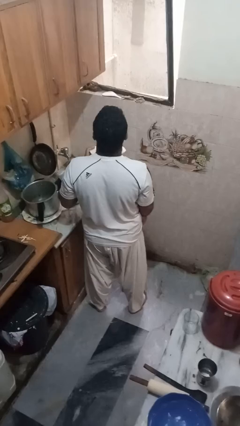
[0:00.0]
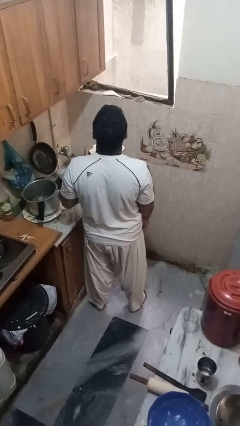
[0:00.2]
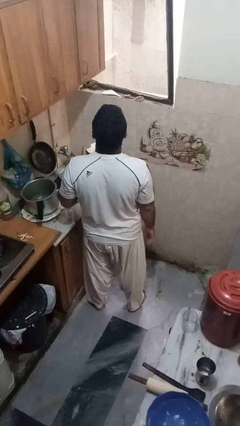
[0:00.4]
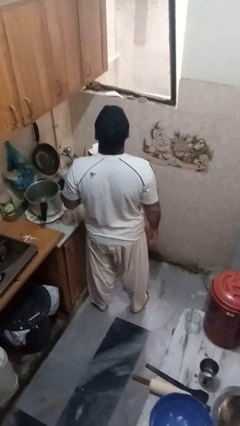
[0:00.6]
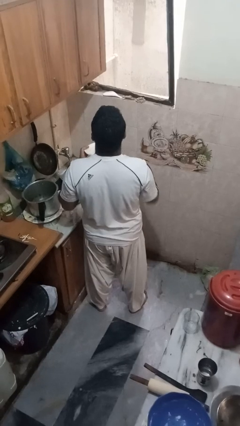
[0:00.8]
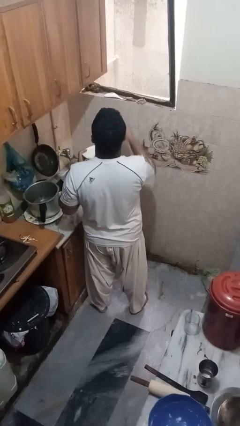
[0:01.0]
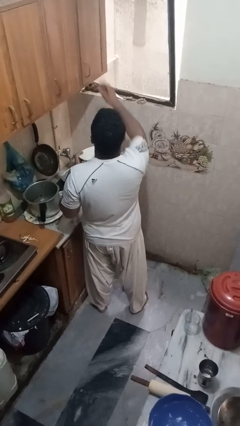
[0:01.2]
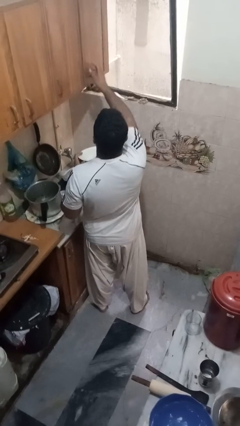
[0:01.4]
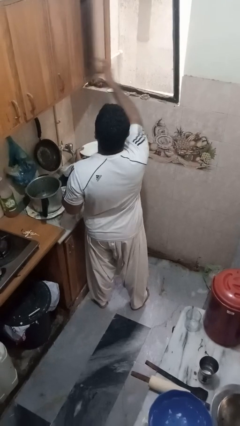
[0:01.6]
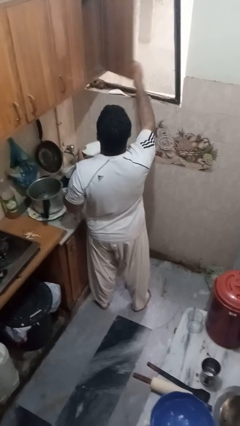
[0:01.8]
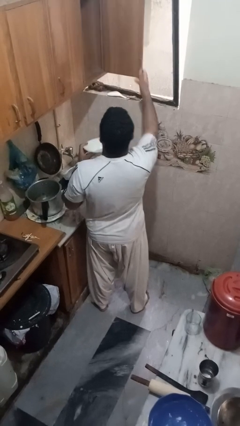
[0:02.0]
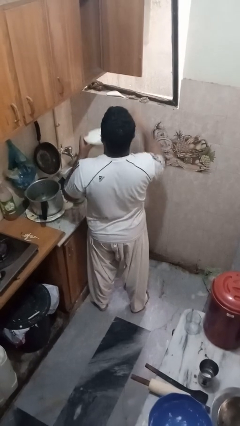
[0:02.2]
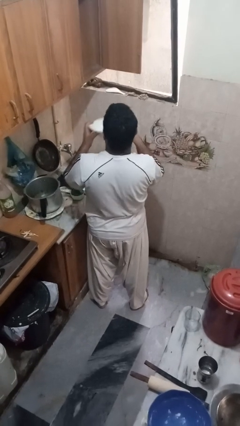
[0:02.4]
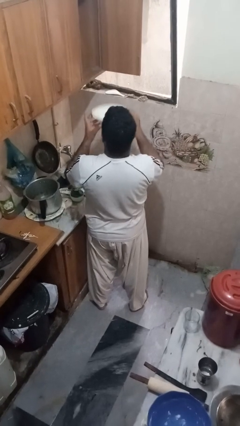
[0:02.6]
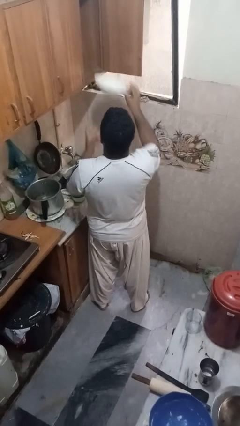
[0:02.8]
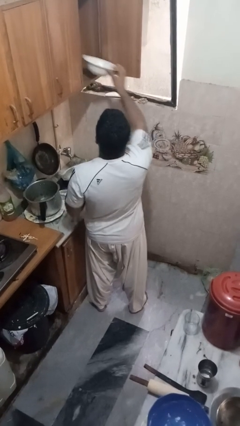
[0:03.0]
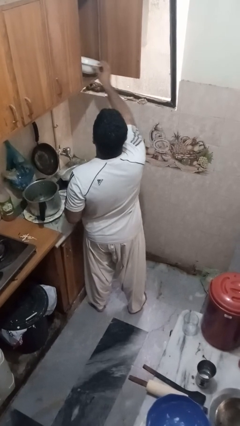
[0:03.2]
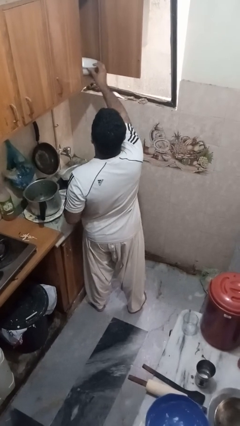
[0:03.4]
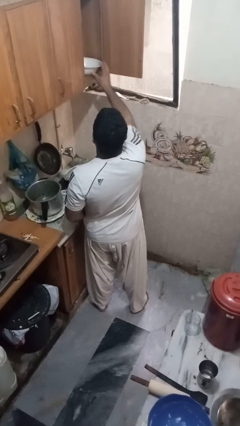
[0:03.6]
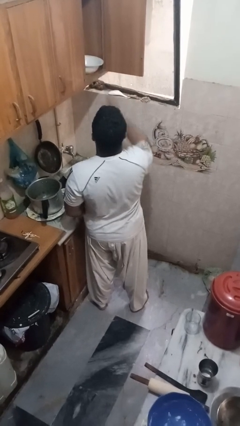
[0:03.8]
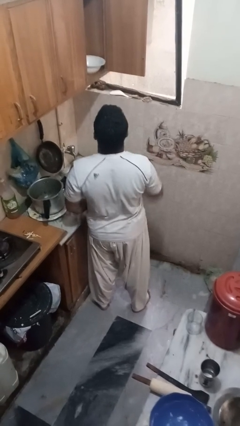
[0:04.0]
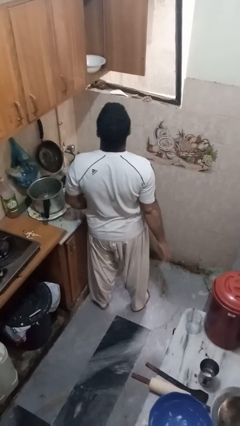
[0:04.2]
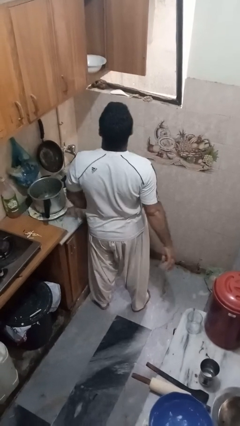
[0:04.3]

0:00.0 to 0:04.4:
person puts object in cabinet

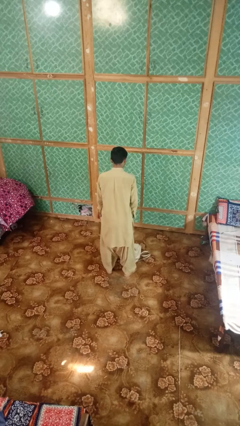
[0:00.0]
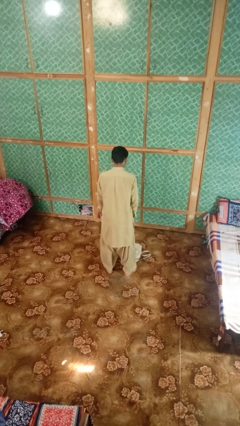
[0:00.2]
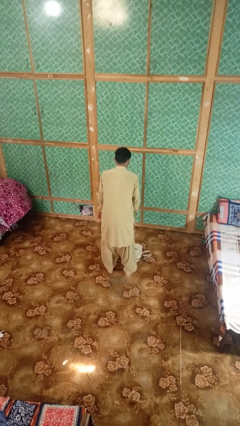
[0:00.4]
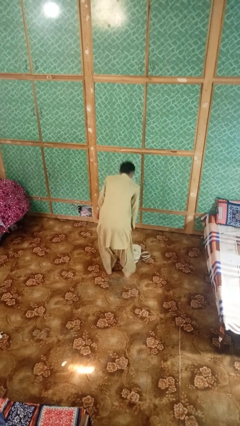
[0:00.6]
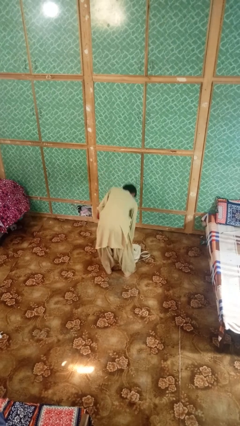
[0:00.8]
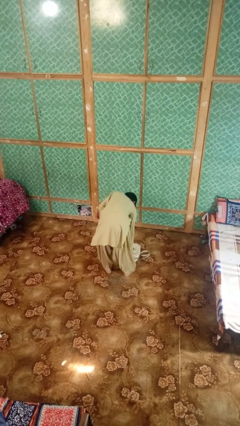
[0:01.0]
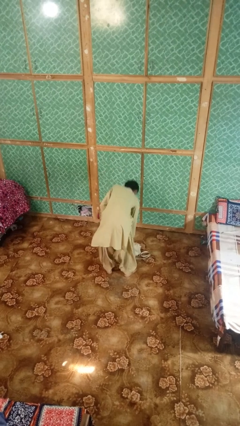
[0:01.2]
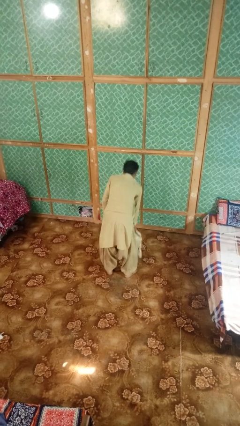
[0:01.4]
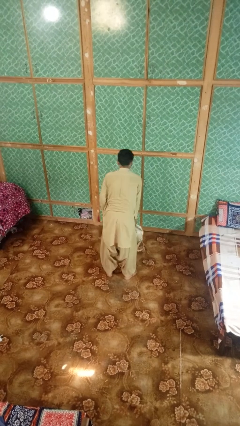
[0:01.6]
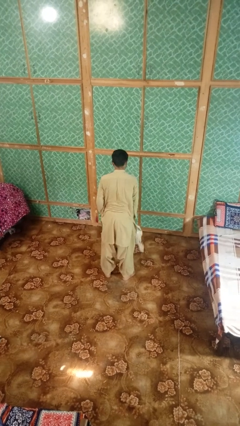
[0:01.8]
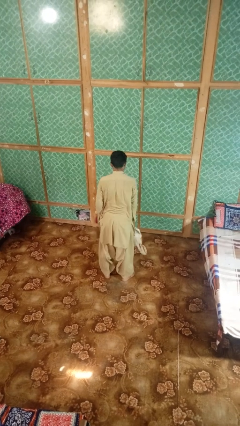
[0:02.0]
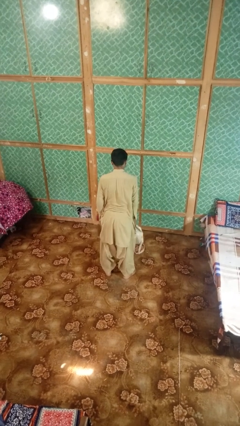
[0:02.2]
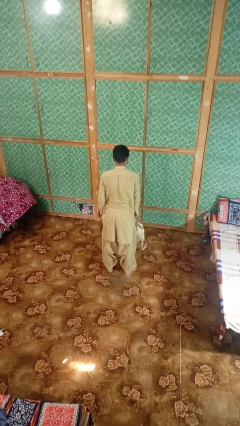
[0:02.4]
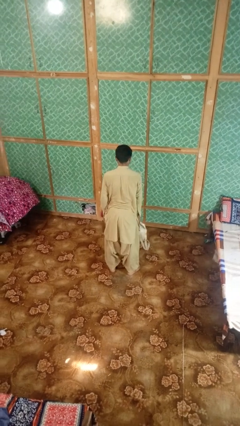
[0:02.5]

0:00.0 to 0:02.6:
person picks up object from floor

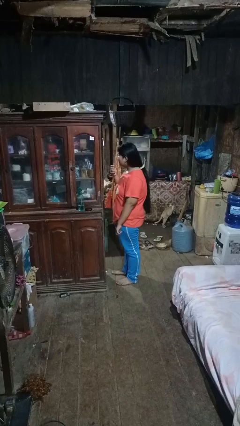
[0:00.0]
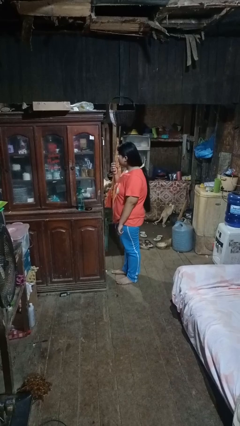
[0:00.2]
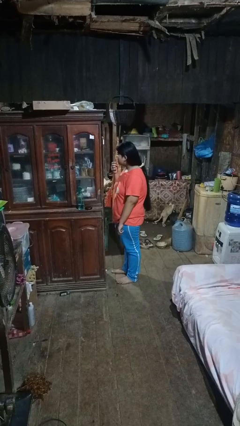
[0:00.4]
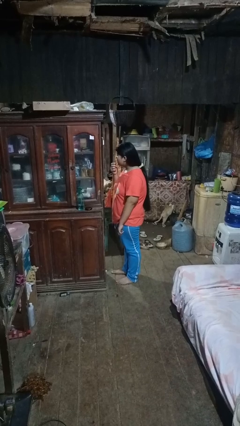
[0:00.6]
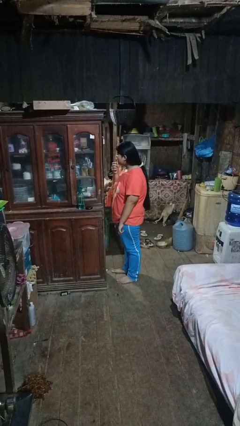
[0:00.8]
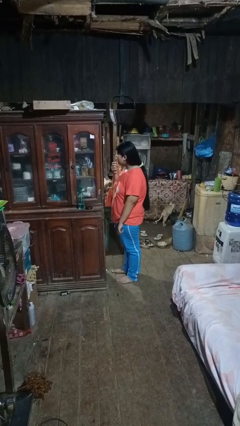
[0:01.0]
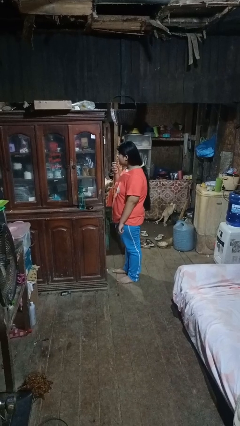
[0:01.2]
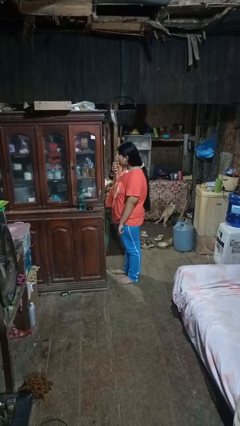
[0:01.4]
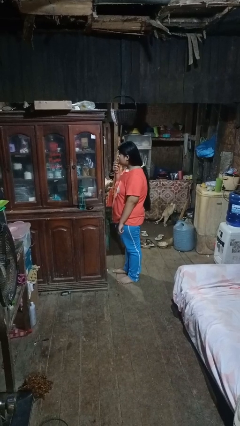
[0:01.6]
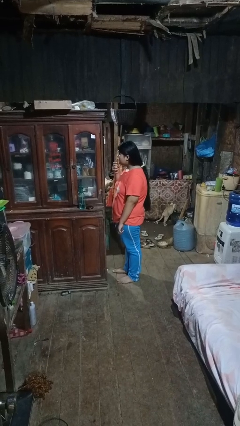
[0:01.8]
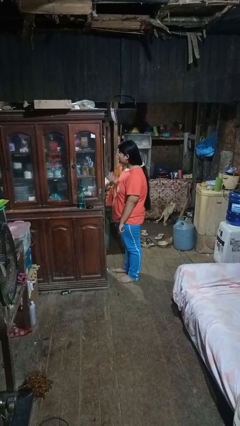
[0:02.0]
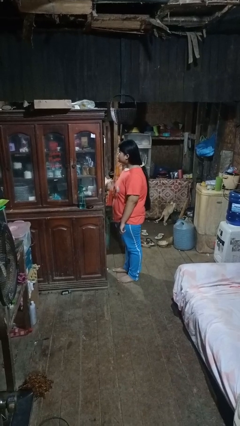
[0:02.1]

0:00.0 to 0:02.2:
person applies lip makeup

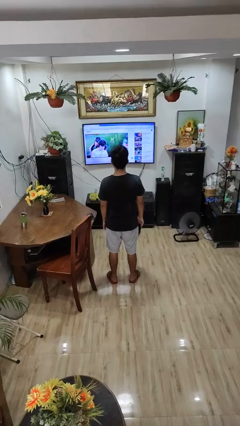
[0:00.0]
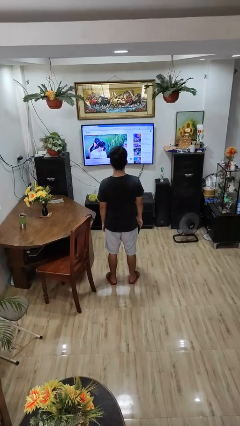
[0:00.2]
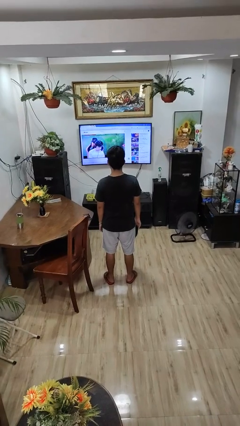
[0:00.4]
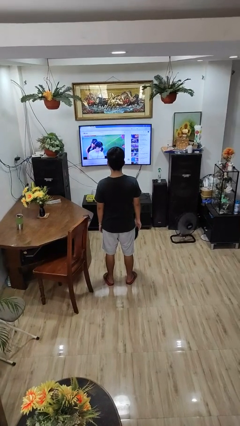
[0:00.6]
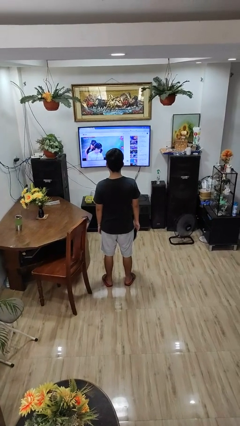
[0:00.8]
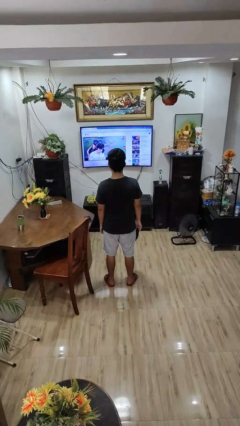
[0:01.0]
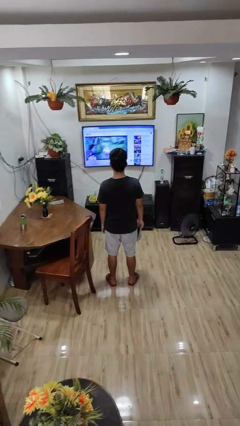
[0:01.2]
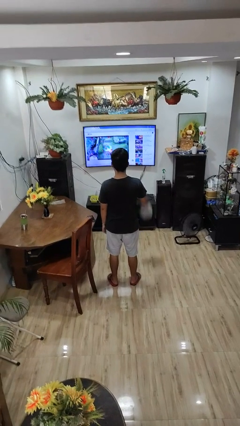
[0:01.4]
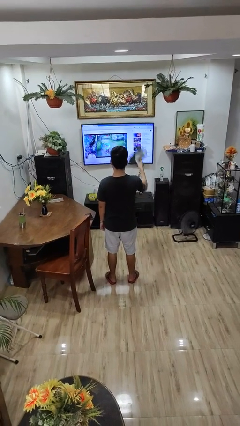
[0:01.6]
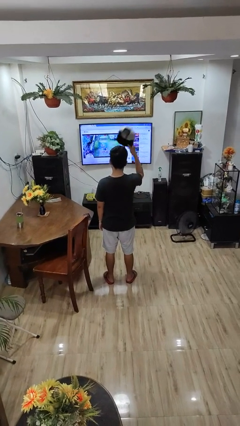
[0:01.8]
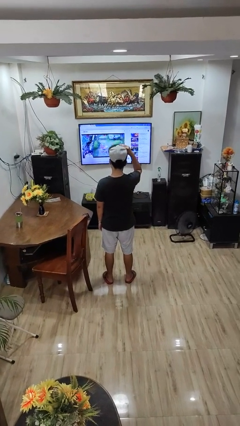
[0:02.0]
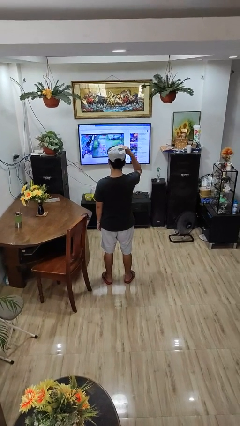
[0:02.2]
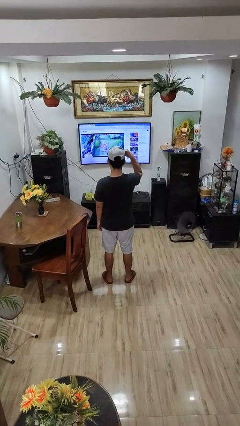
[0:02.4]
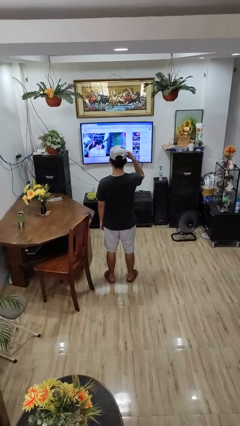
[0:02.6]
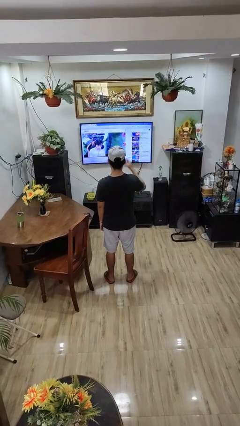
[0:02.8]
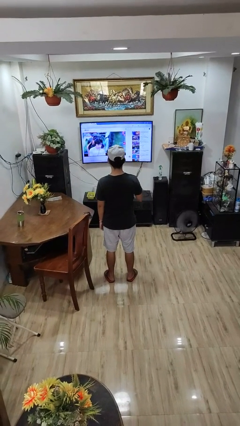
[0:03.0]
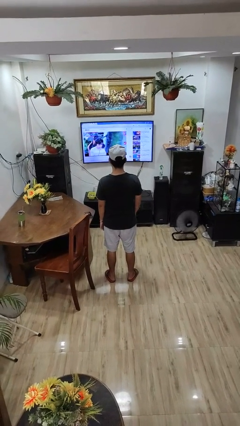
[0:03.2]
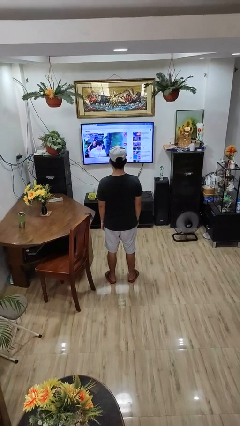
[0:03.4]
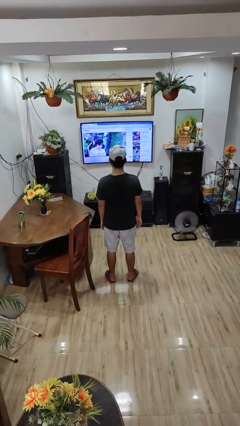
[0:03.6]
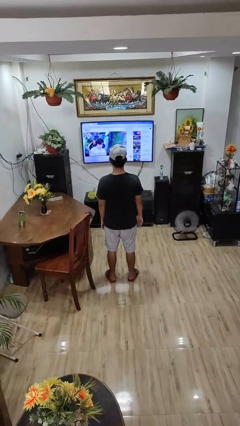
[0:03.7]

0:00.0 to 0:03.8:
person sweeps floor

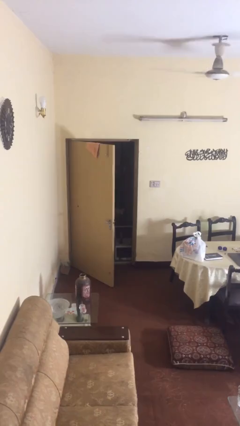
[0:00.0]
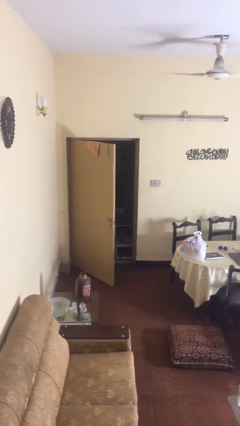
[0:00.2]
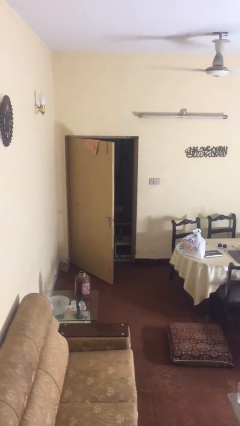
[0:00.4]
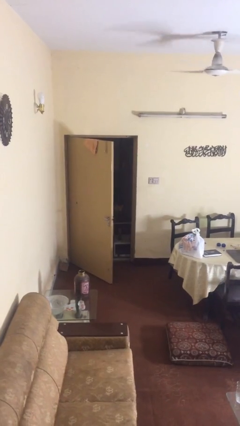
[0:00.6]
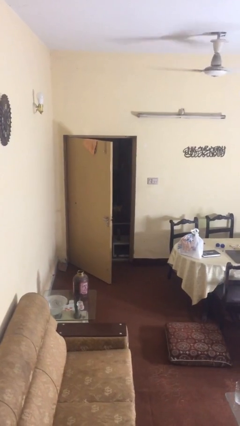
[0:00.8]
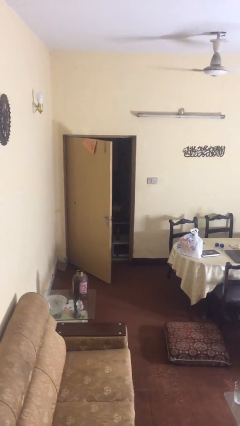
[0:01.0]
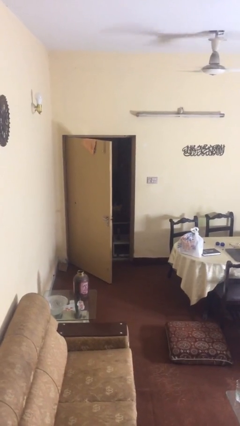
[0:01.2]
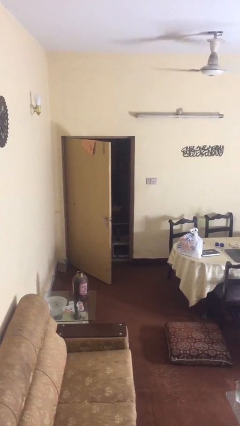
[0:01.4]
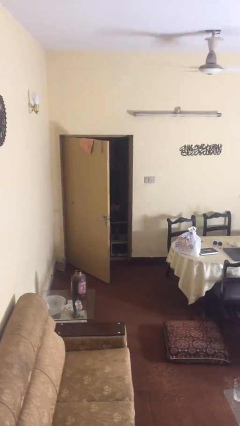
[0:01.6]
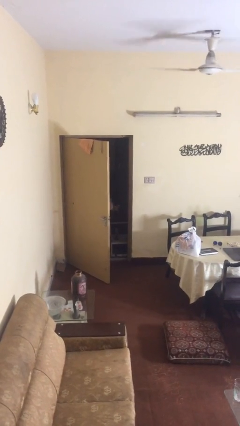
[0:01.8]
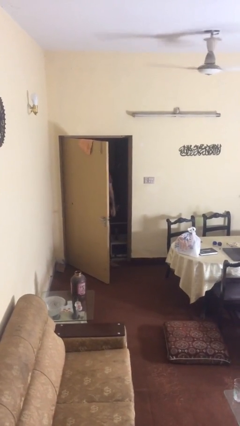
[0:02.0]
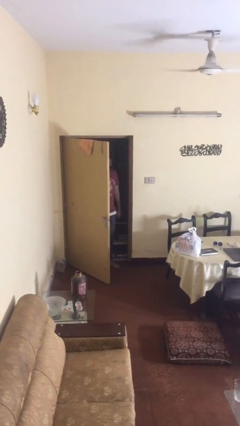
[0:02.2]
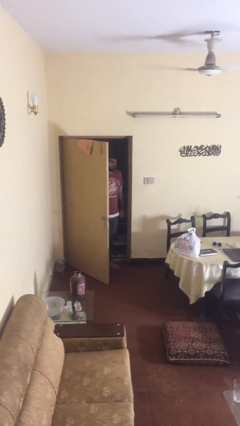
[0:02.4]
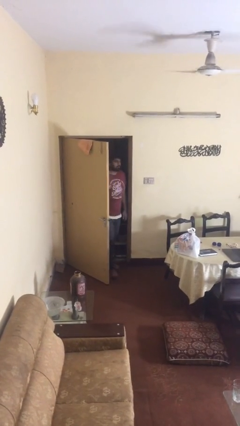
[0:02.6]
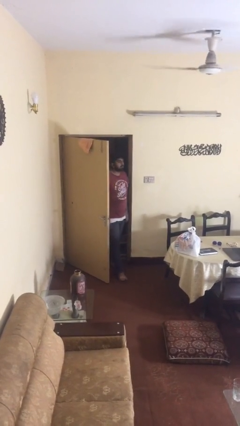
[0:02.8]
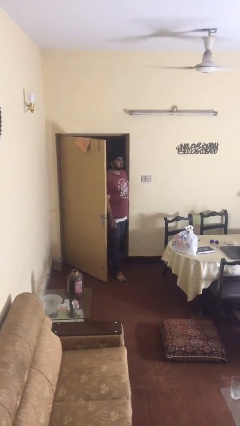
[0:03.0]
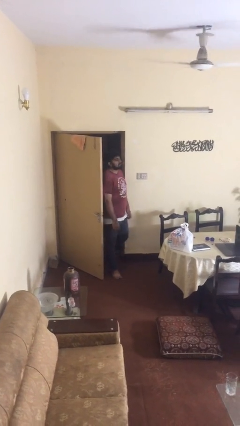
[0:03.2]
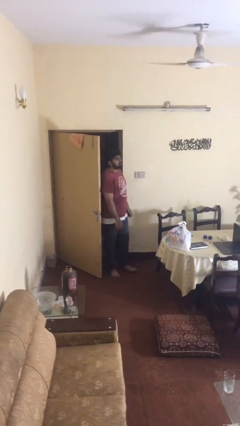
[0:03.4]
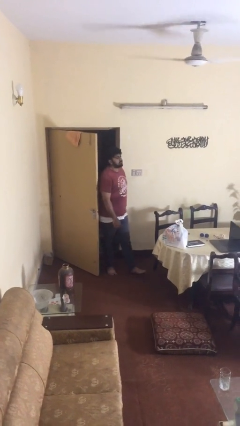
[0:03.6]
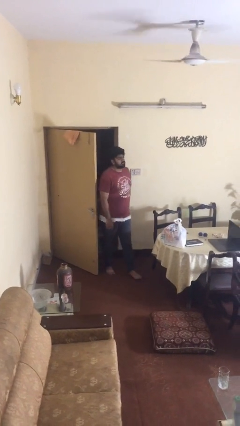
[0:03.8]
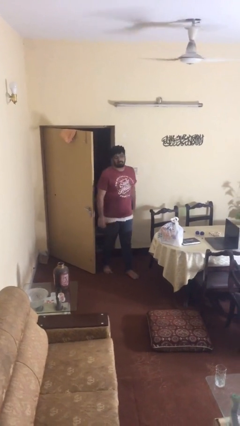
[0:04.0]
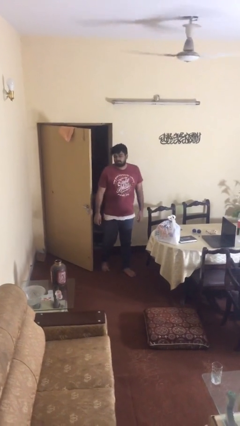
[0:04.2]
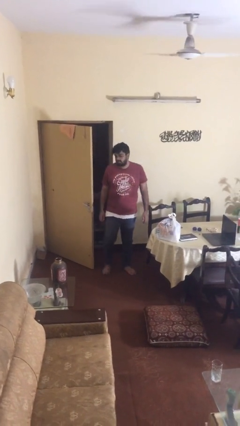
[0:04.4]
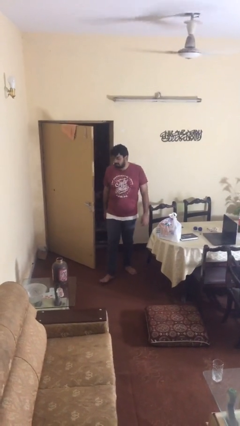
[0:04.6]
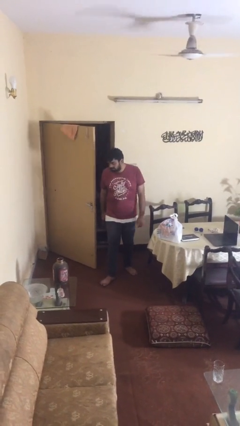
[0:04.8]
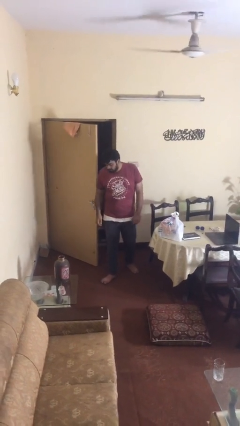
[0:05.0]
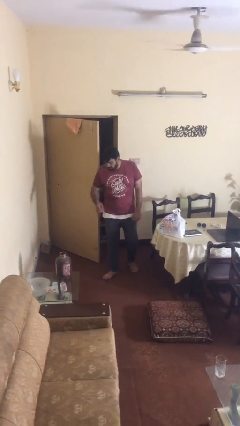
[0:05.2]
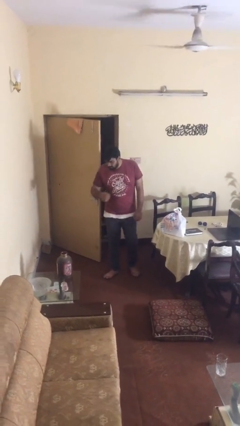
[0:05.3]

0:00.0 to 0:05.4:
person enters scene through structure
